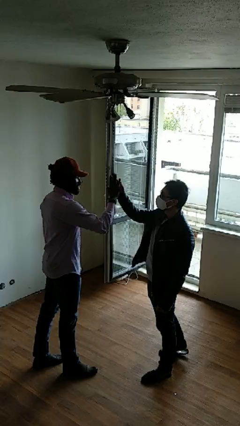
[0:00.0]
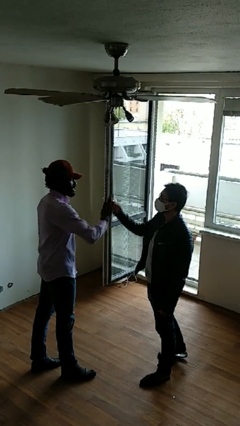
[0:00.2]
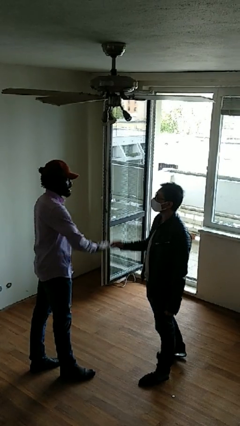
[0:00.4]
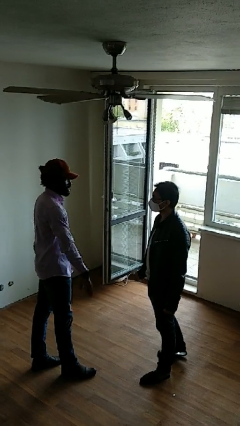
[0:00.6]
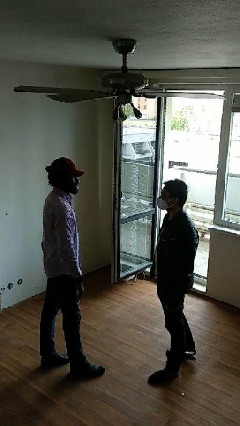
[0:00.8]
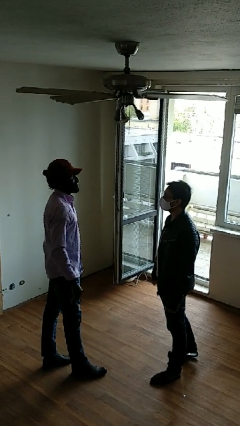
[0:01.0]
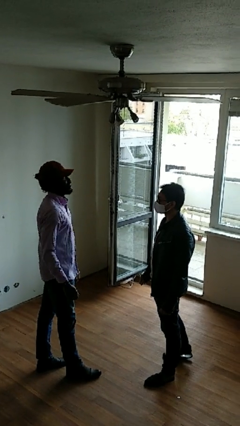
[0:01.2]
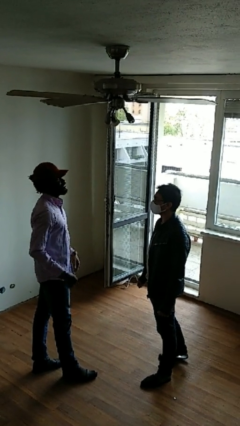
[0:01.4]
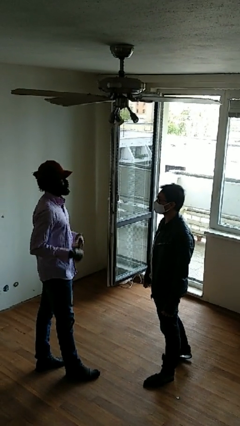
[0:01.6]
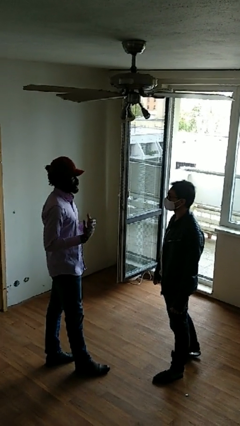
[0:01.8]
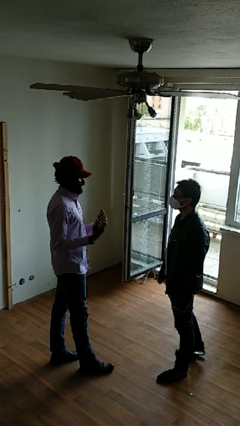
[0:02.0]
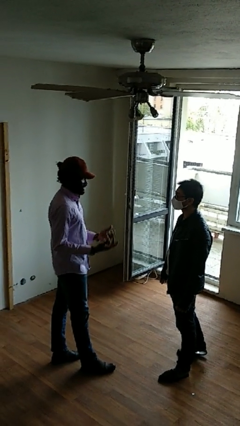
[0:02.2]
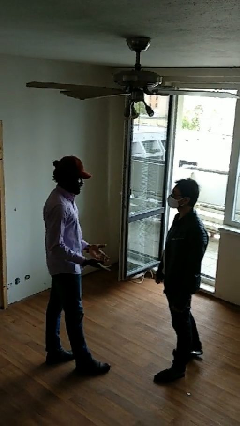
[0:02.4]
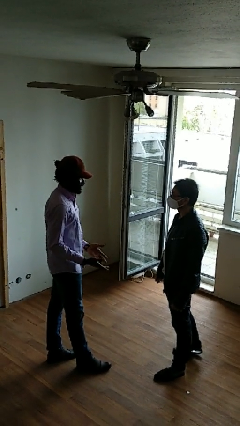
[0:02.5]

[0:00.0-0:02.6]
person highfives hand

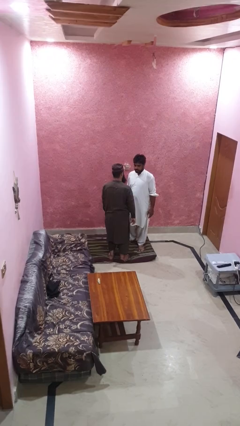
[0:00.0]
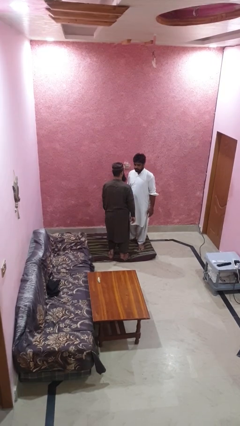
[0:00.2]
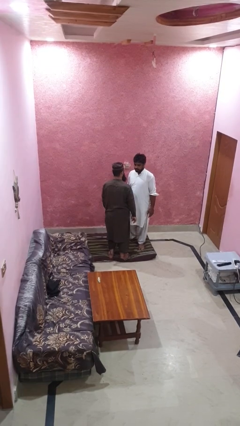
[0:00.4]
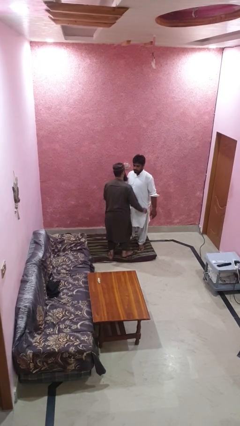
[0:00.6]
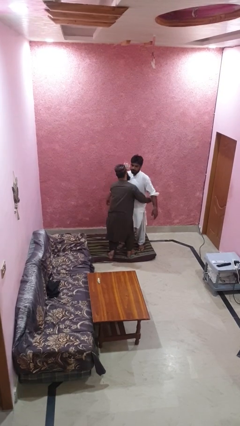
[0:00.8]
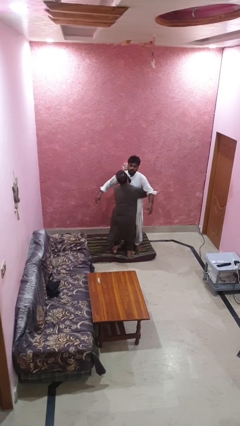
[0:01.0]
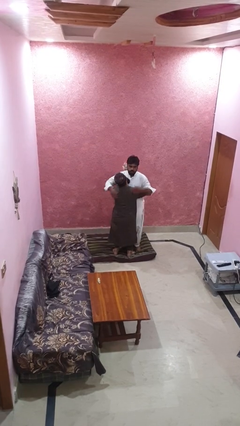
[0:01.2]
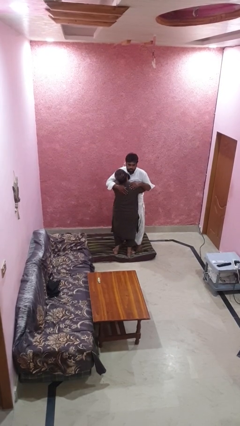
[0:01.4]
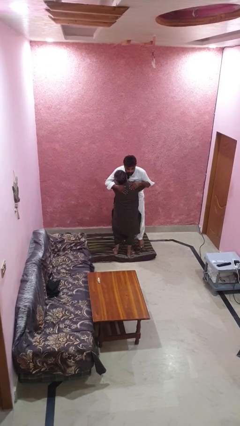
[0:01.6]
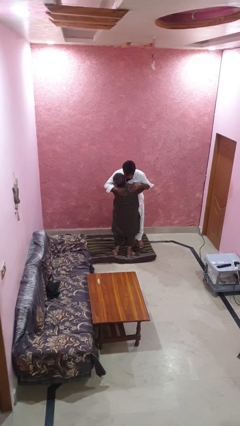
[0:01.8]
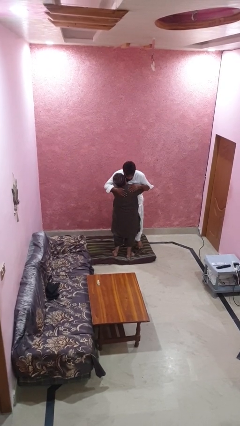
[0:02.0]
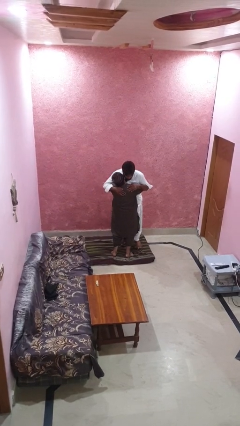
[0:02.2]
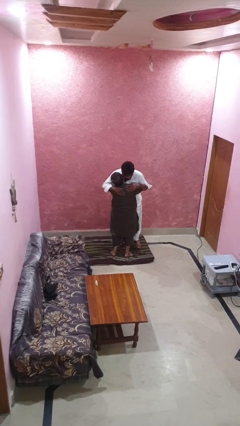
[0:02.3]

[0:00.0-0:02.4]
person picks up person

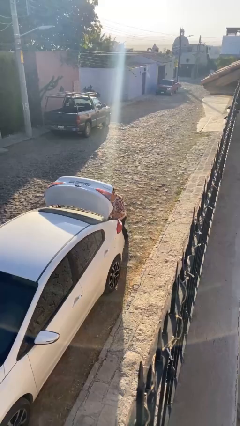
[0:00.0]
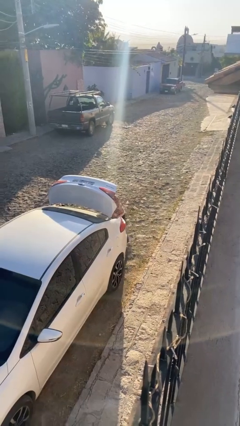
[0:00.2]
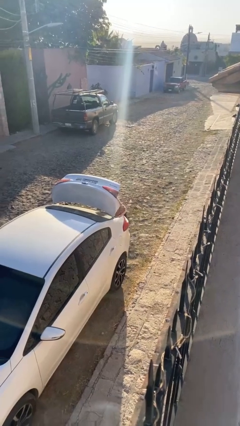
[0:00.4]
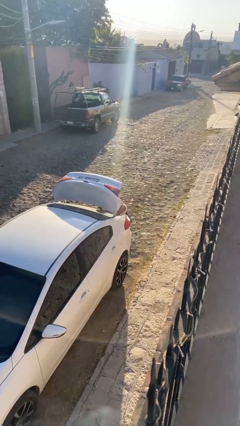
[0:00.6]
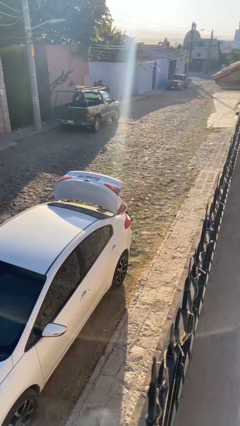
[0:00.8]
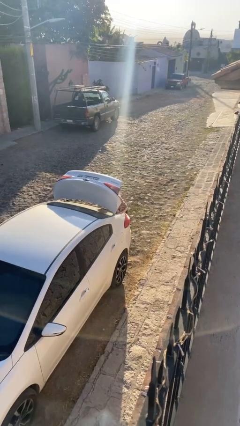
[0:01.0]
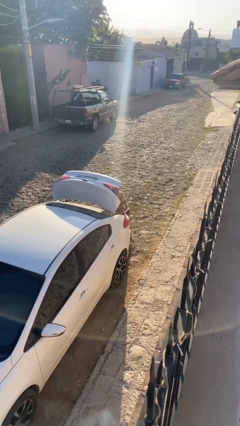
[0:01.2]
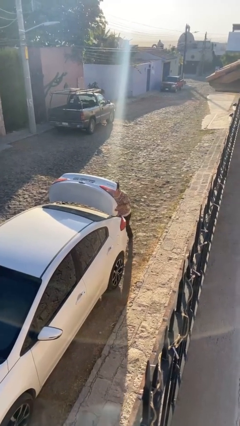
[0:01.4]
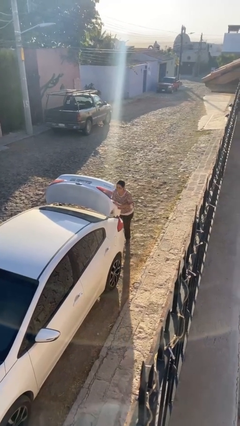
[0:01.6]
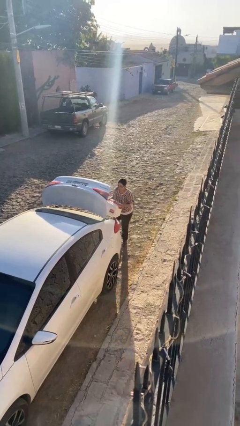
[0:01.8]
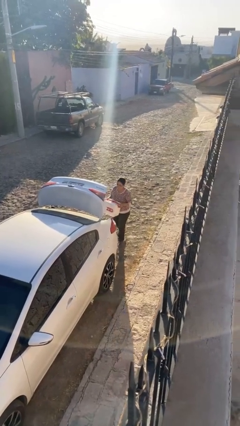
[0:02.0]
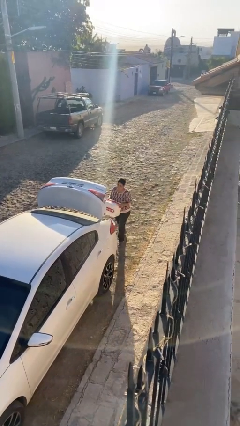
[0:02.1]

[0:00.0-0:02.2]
person unloads car

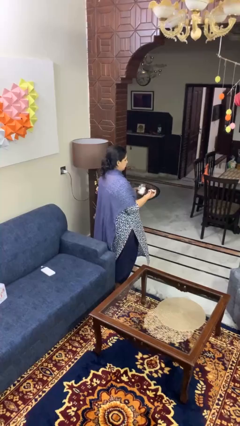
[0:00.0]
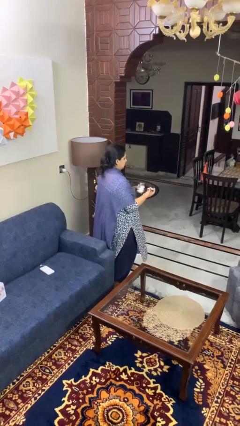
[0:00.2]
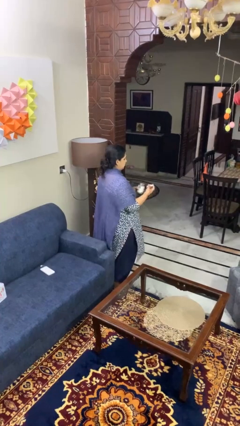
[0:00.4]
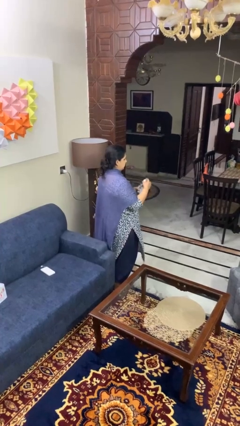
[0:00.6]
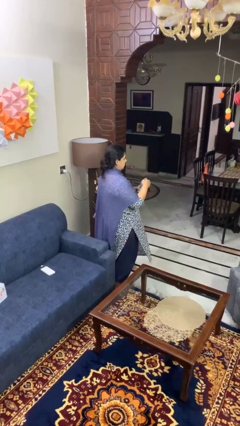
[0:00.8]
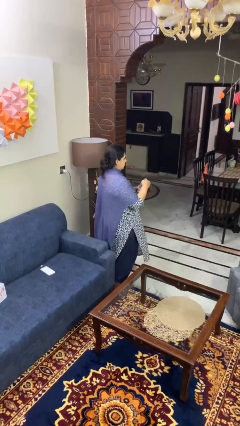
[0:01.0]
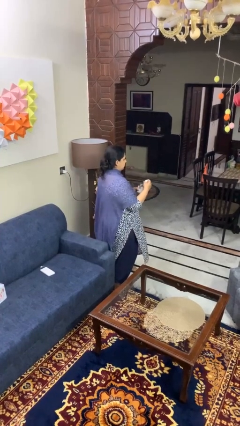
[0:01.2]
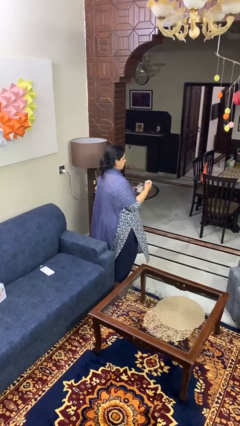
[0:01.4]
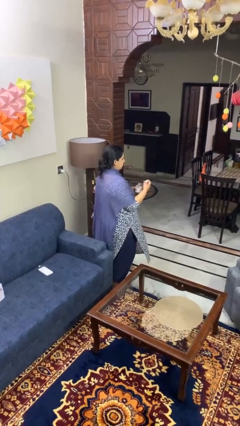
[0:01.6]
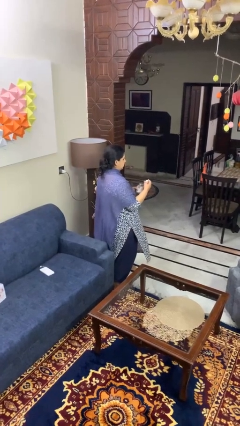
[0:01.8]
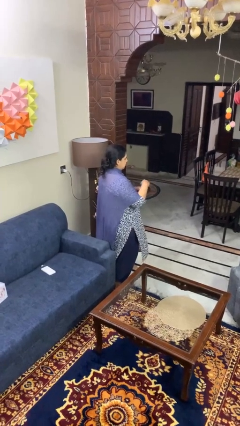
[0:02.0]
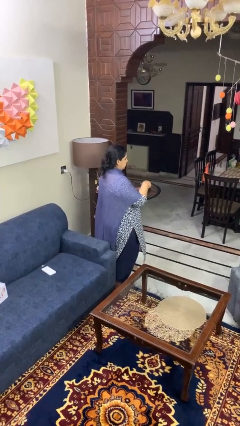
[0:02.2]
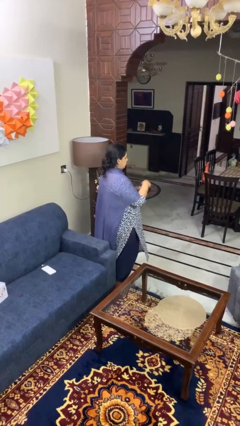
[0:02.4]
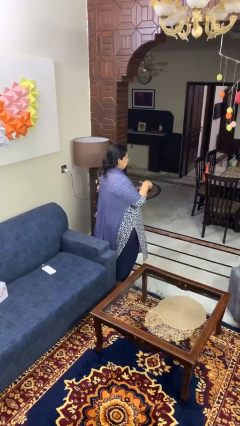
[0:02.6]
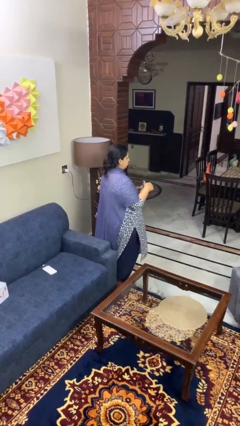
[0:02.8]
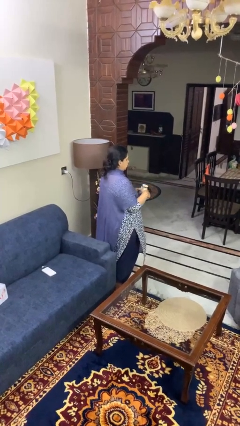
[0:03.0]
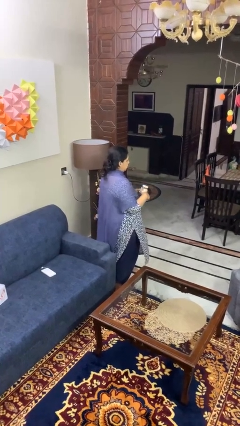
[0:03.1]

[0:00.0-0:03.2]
person closes jar

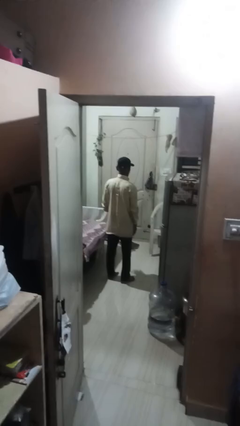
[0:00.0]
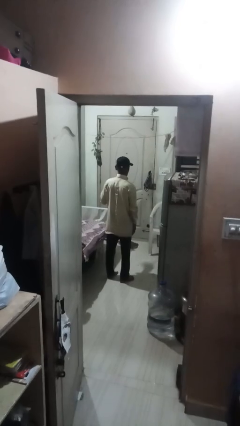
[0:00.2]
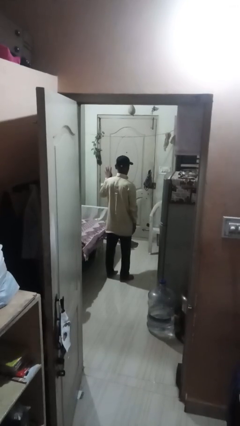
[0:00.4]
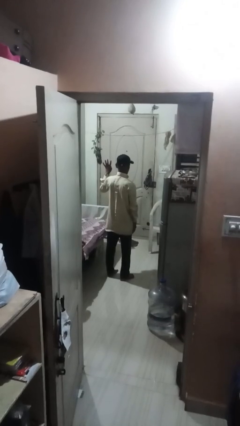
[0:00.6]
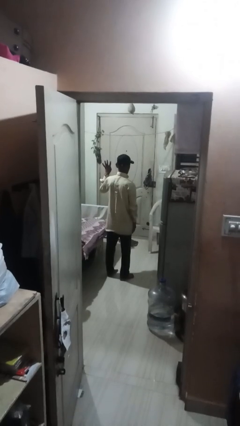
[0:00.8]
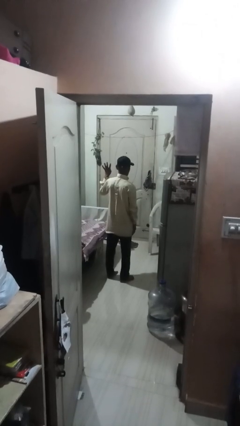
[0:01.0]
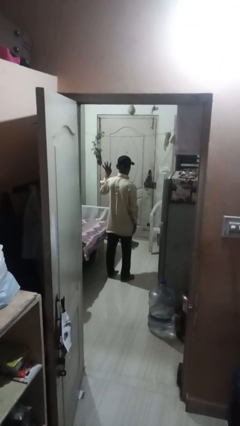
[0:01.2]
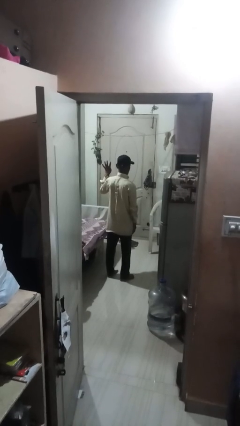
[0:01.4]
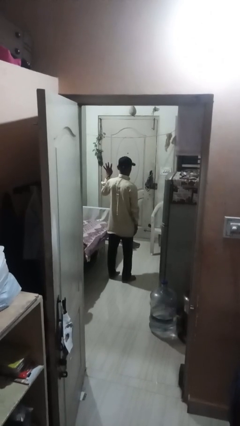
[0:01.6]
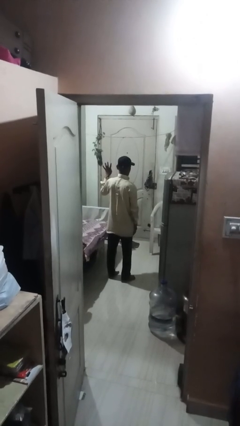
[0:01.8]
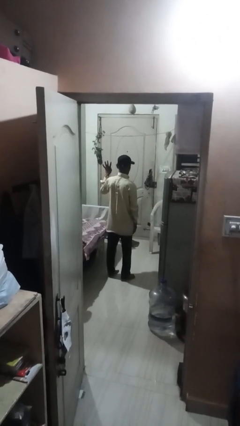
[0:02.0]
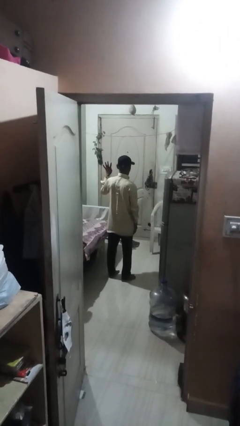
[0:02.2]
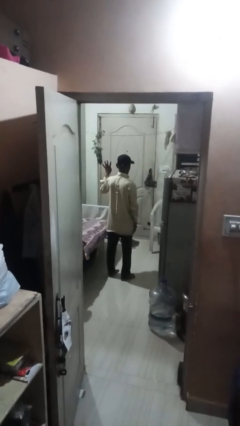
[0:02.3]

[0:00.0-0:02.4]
person gestures number four

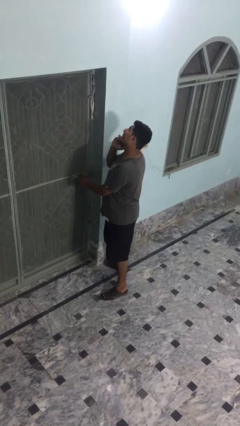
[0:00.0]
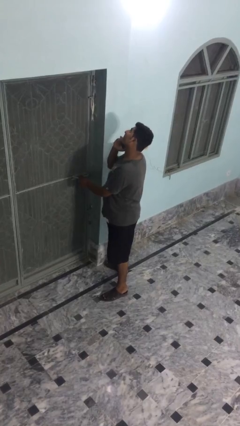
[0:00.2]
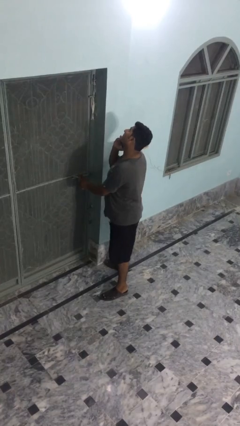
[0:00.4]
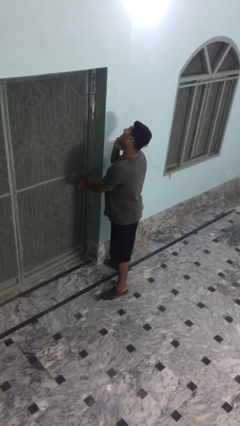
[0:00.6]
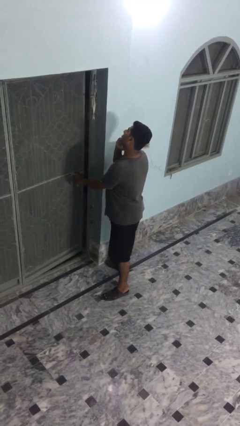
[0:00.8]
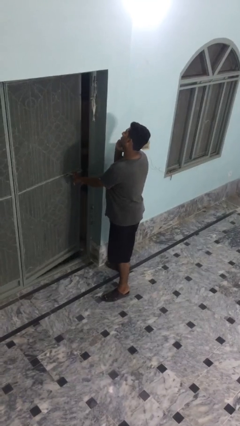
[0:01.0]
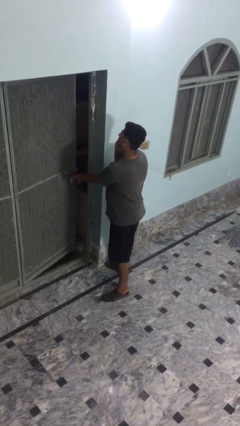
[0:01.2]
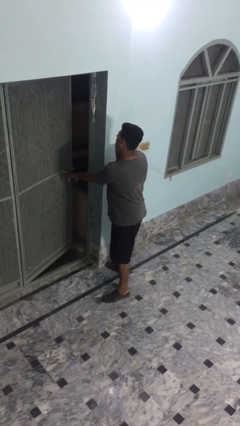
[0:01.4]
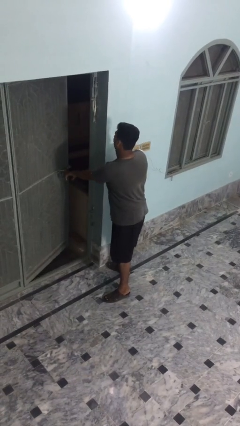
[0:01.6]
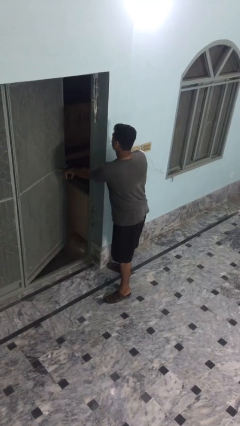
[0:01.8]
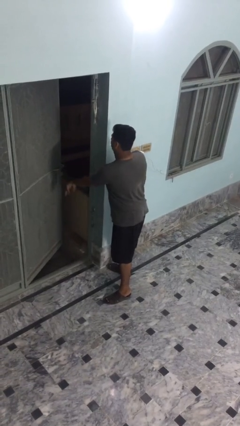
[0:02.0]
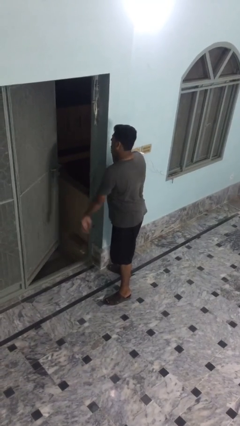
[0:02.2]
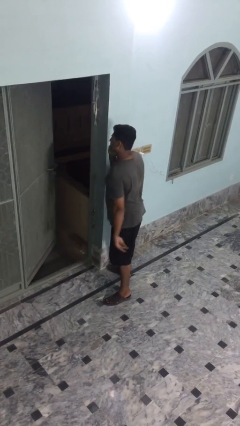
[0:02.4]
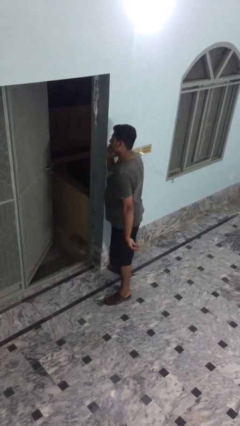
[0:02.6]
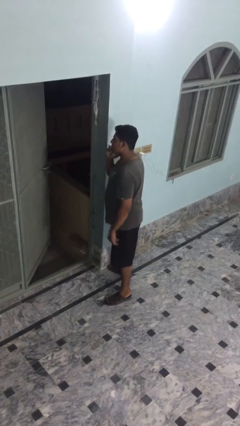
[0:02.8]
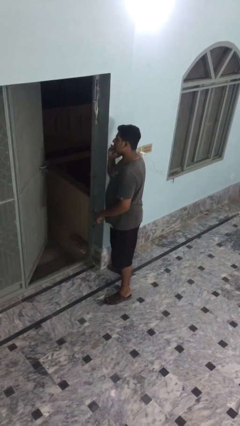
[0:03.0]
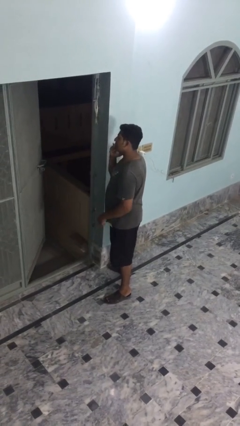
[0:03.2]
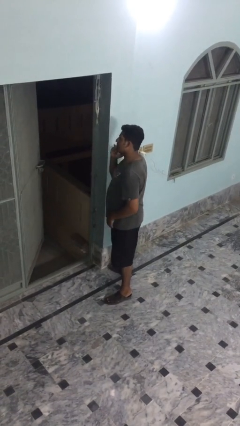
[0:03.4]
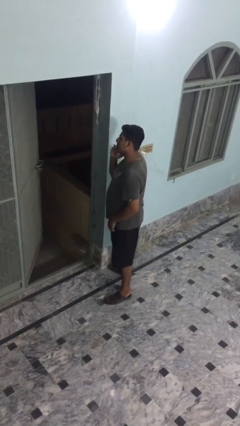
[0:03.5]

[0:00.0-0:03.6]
person opens facility door

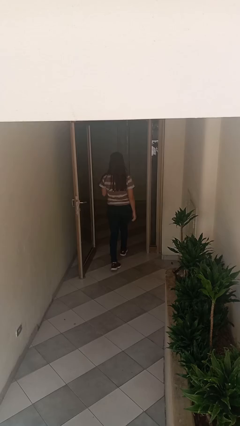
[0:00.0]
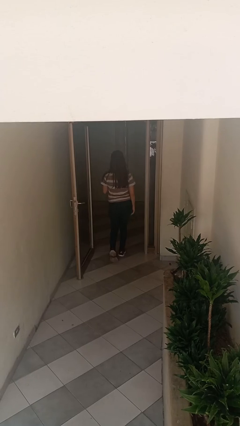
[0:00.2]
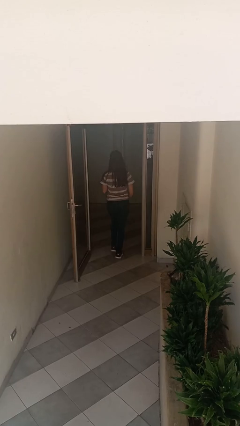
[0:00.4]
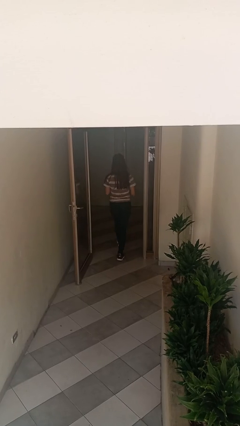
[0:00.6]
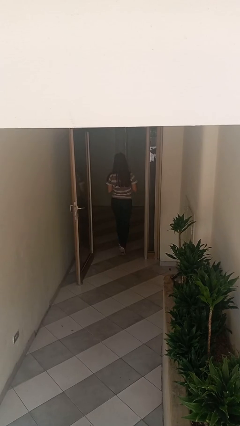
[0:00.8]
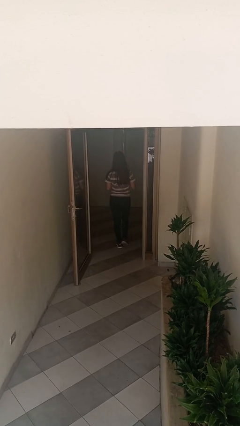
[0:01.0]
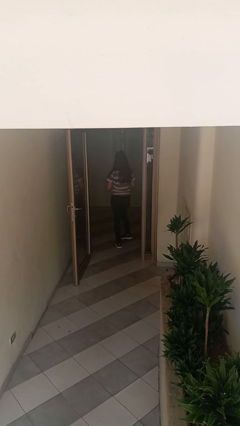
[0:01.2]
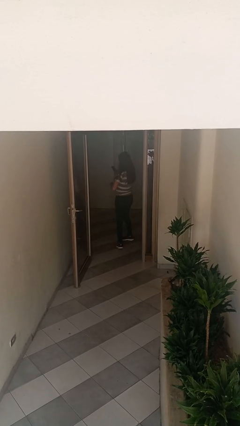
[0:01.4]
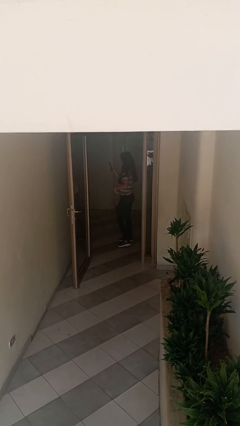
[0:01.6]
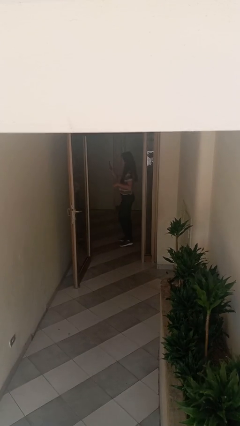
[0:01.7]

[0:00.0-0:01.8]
person exits scene through structure
